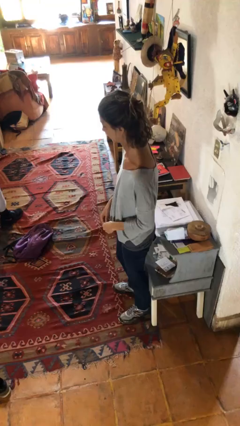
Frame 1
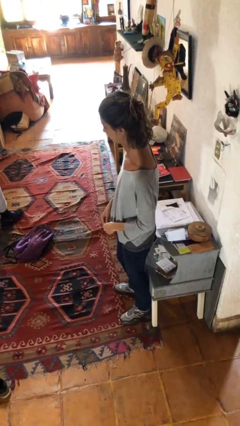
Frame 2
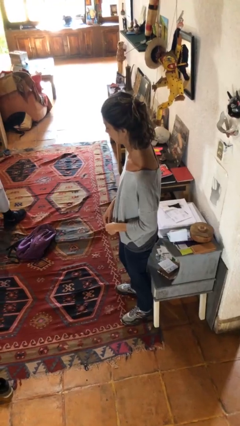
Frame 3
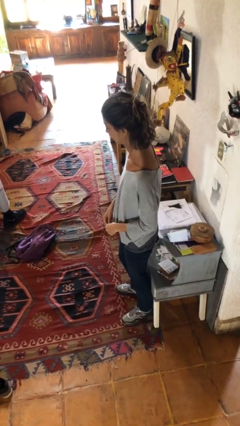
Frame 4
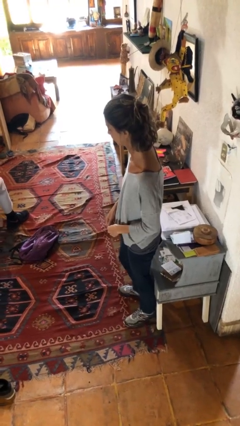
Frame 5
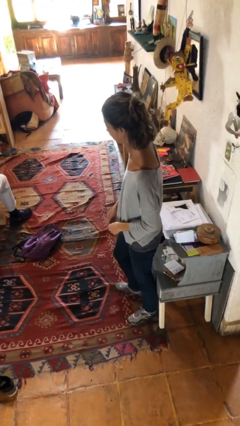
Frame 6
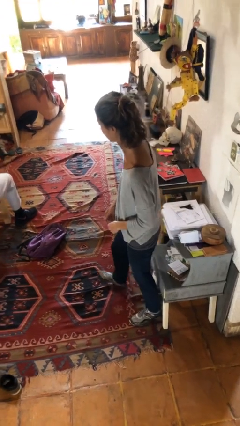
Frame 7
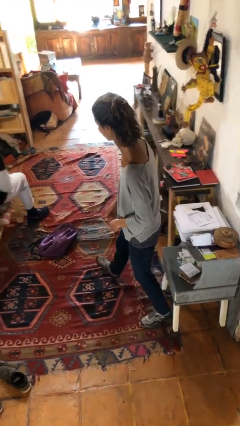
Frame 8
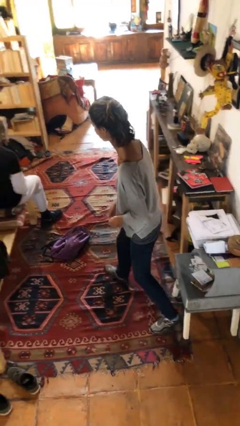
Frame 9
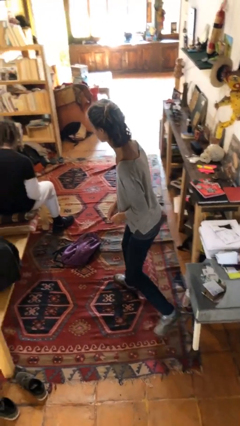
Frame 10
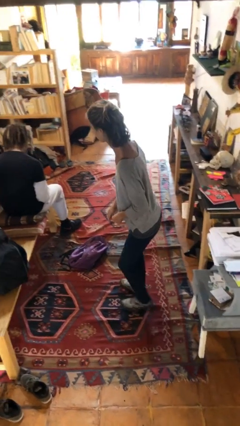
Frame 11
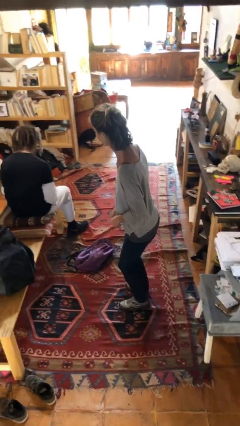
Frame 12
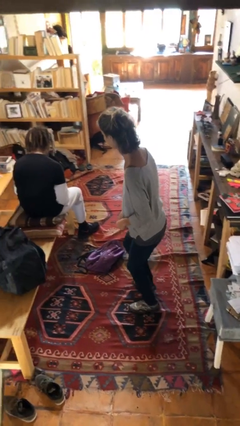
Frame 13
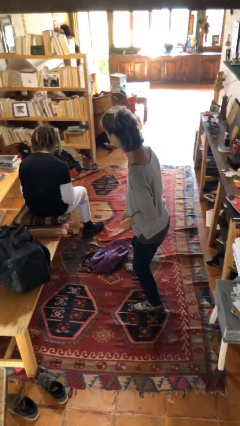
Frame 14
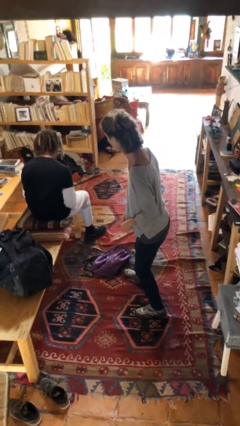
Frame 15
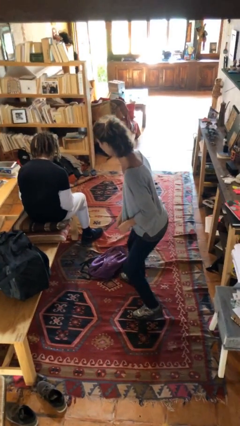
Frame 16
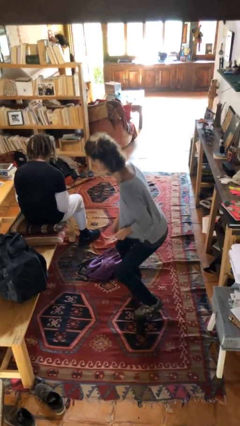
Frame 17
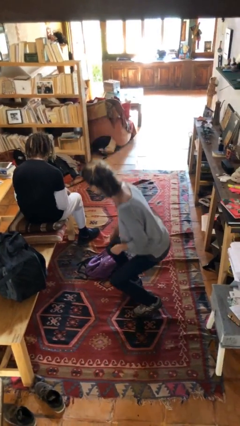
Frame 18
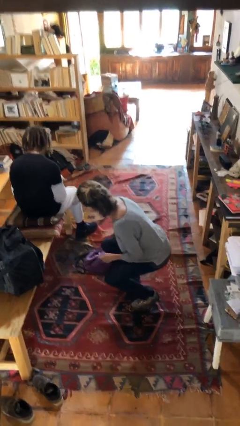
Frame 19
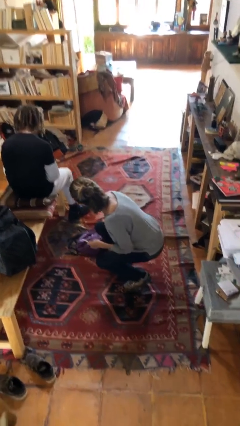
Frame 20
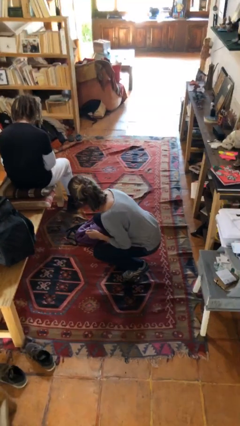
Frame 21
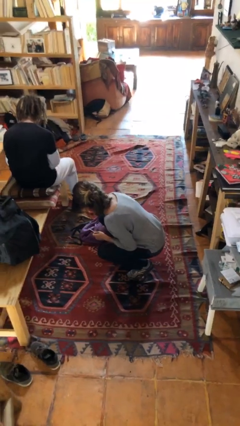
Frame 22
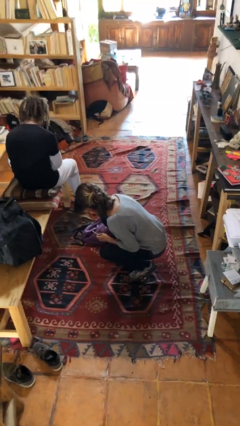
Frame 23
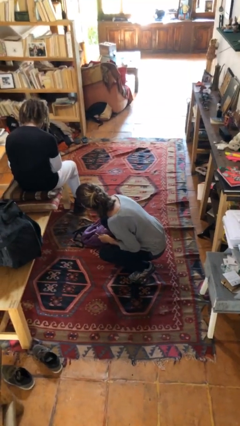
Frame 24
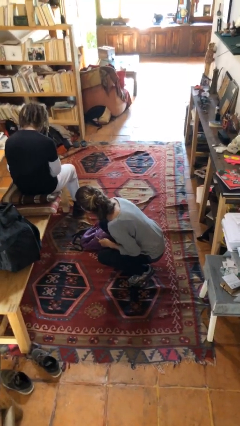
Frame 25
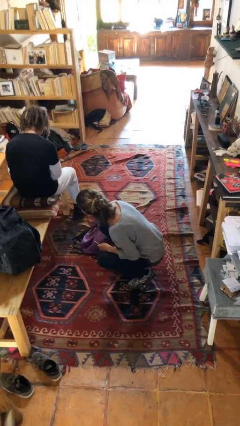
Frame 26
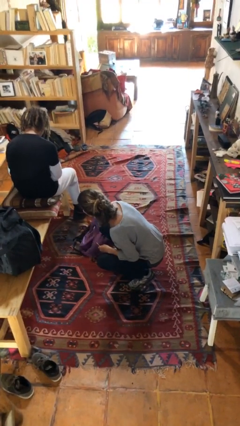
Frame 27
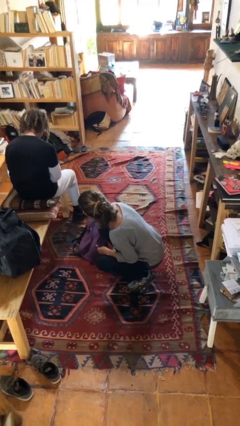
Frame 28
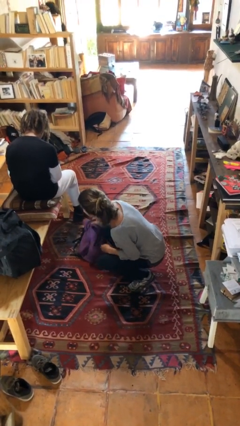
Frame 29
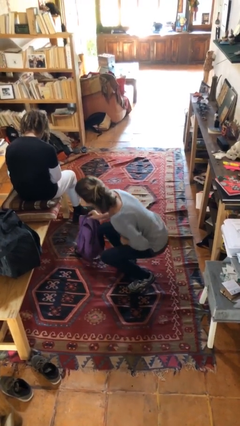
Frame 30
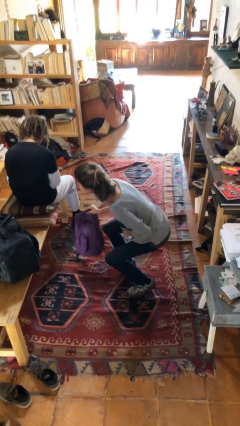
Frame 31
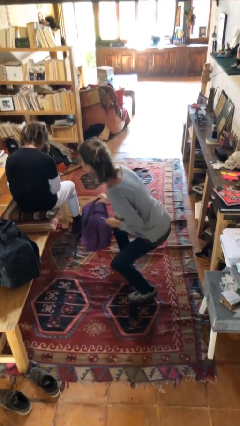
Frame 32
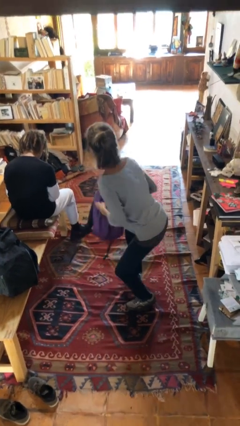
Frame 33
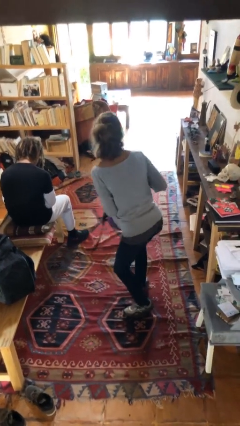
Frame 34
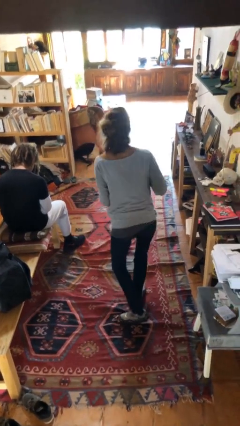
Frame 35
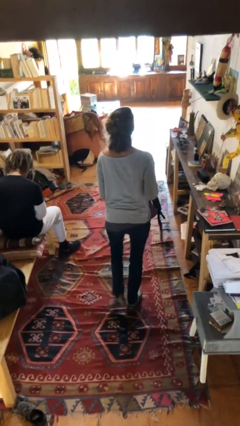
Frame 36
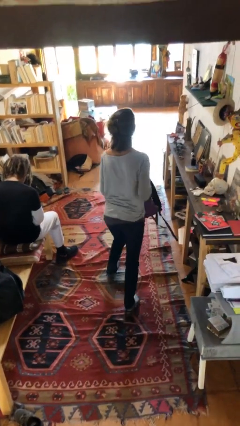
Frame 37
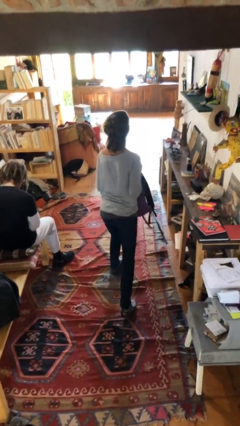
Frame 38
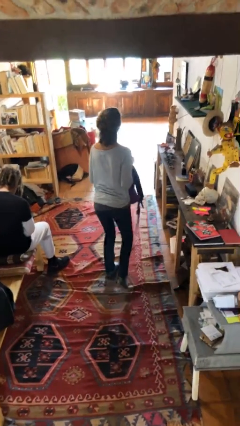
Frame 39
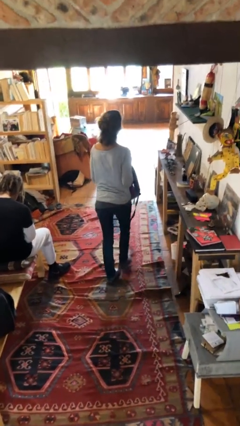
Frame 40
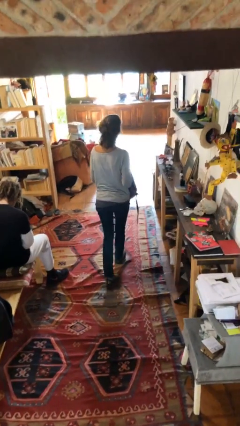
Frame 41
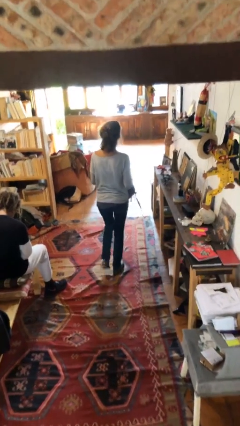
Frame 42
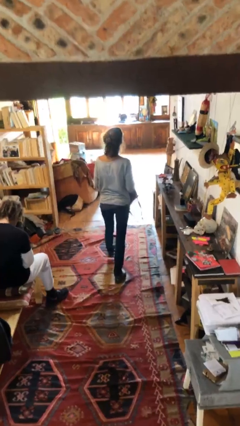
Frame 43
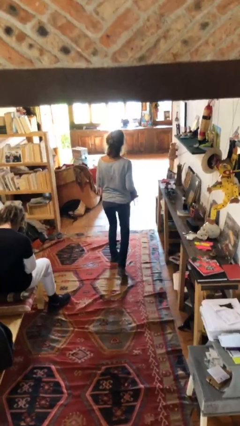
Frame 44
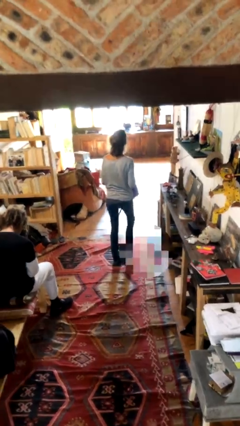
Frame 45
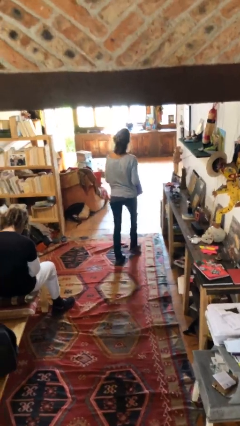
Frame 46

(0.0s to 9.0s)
person steals object from person

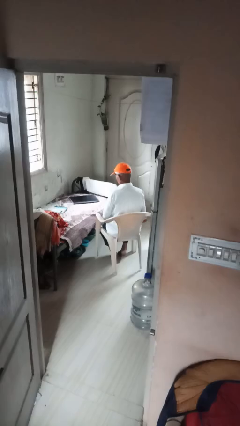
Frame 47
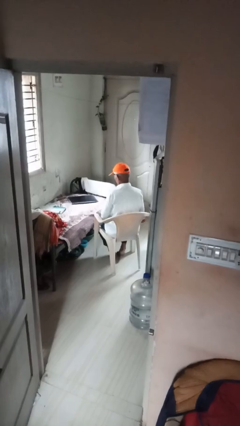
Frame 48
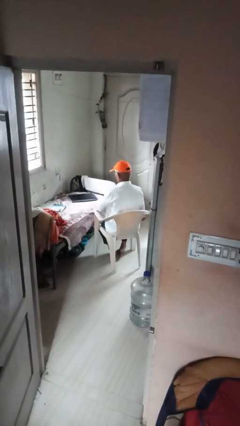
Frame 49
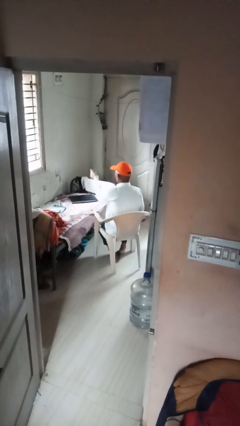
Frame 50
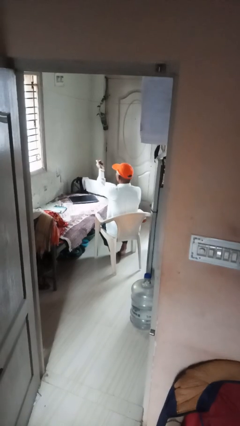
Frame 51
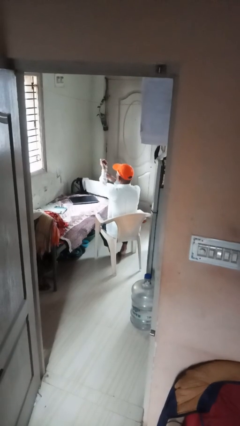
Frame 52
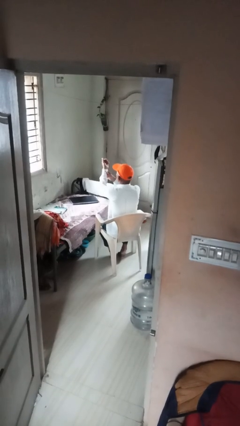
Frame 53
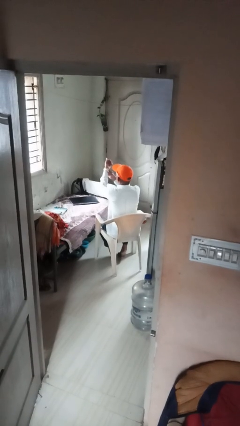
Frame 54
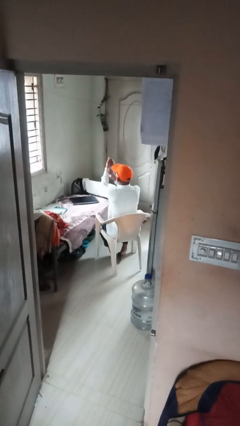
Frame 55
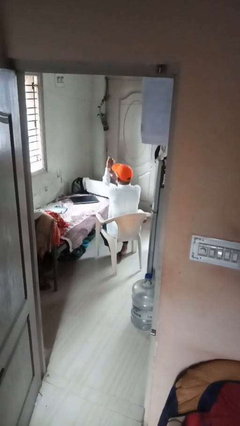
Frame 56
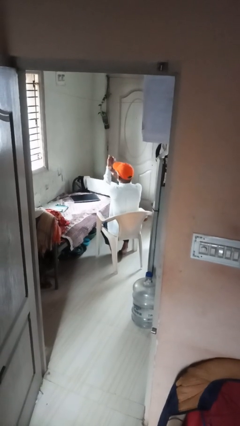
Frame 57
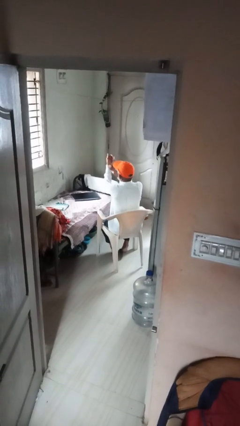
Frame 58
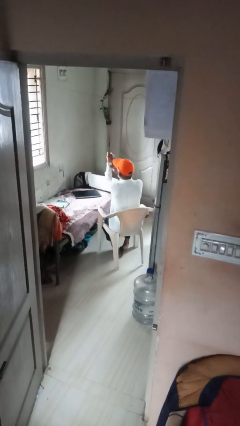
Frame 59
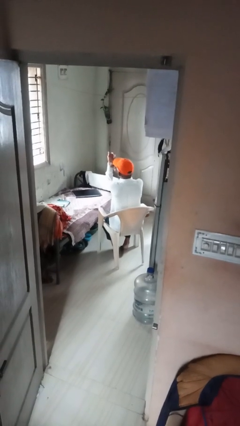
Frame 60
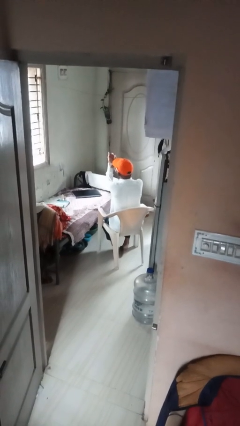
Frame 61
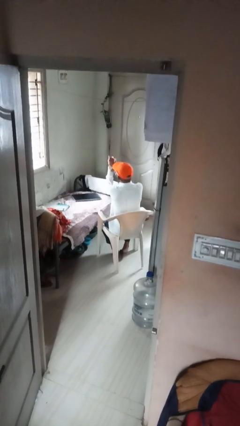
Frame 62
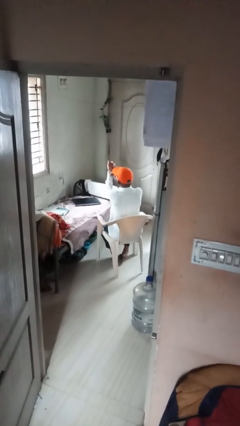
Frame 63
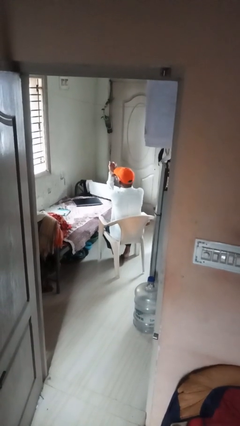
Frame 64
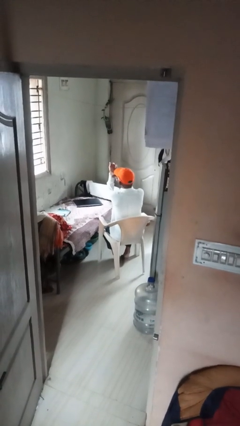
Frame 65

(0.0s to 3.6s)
person looks at wristwatch

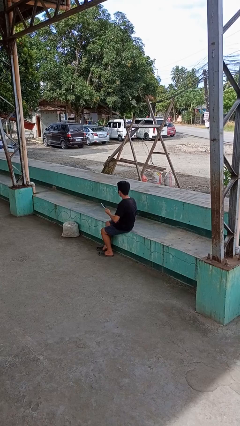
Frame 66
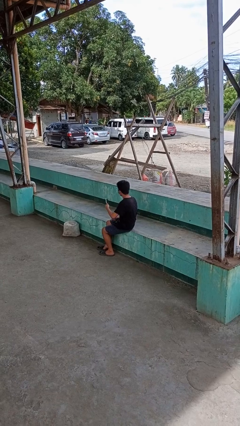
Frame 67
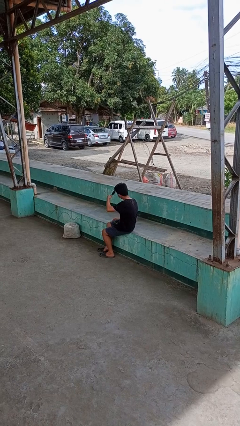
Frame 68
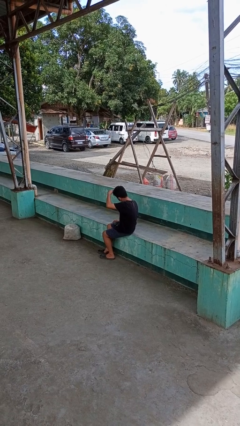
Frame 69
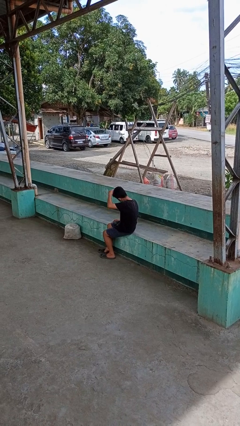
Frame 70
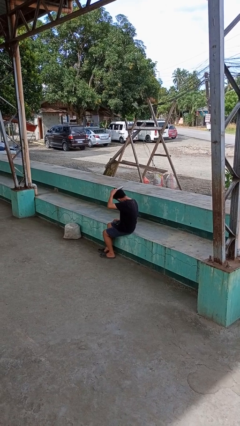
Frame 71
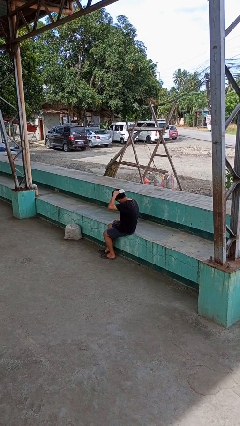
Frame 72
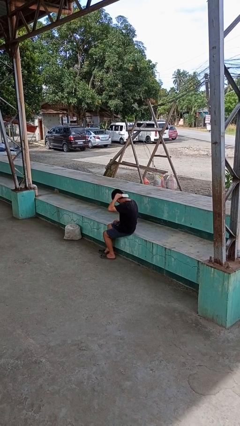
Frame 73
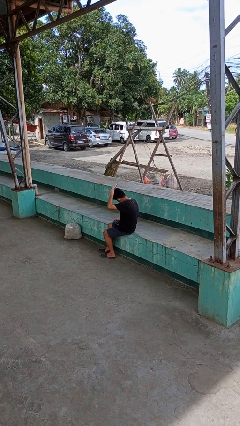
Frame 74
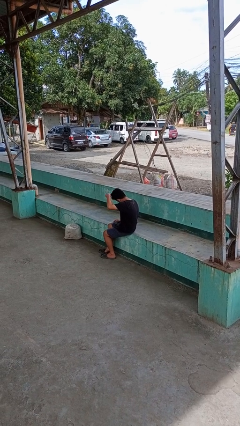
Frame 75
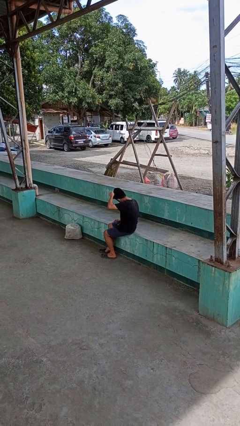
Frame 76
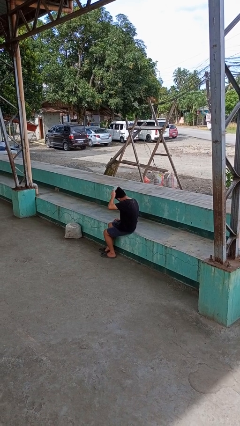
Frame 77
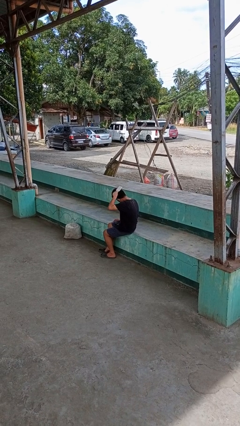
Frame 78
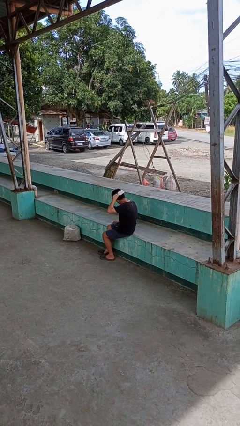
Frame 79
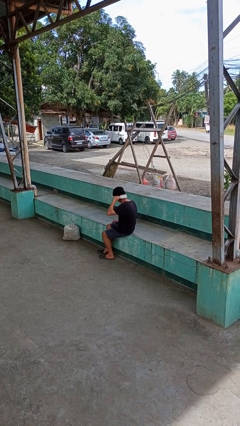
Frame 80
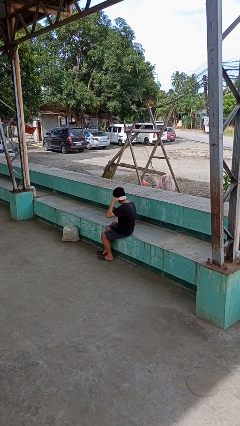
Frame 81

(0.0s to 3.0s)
person brushes hair

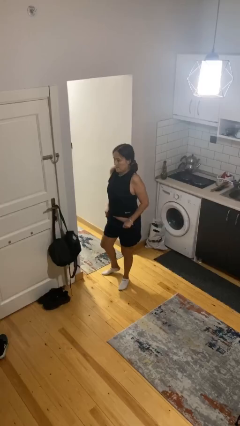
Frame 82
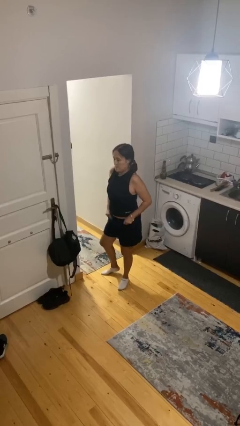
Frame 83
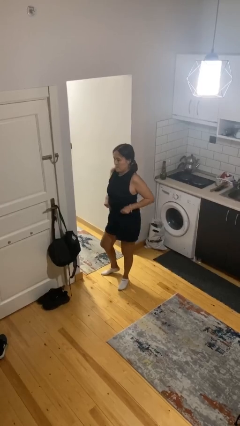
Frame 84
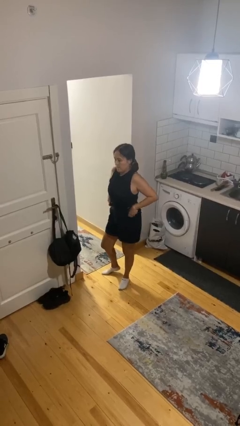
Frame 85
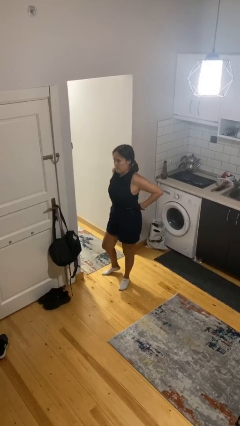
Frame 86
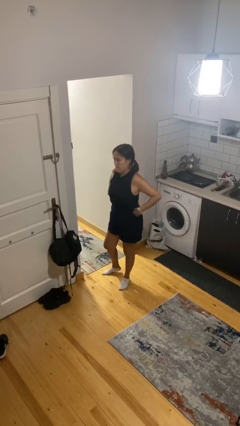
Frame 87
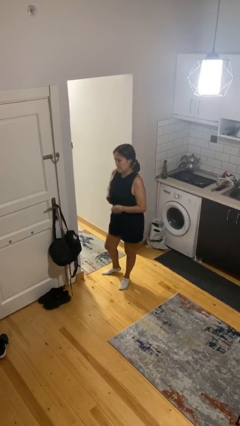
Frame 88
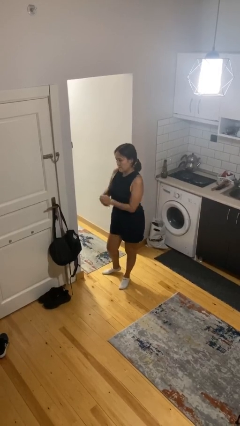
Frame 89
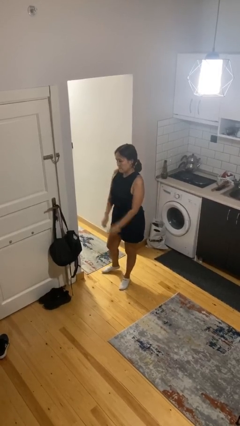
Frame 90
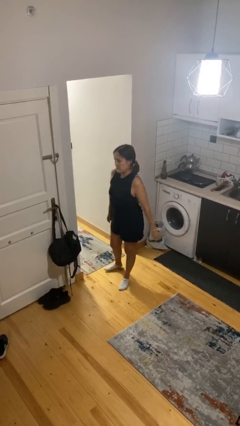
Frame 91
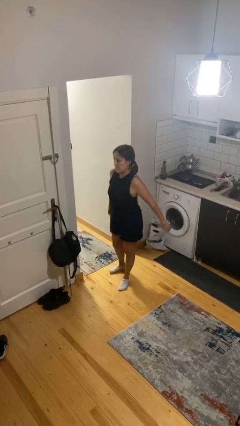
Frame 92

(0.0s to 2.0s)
person hikes up pants

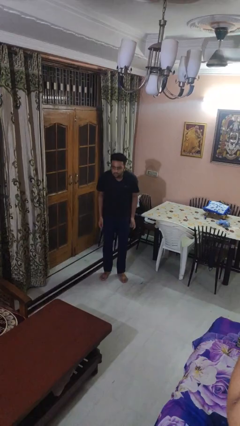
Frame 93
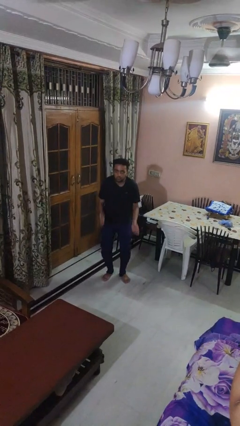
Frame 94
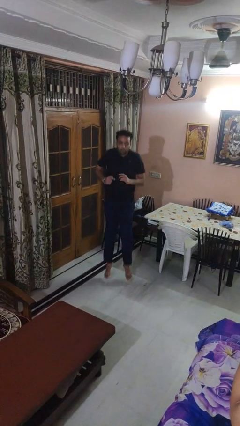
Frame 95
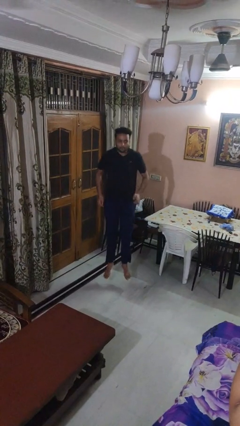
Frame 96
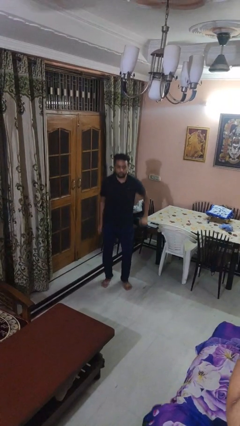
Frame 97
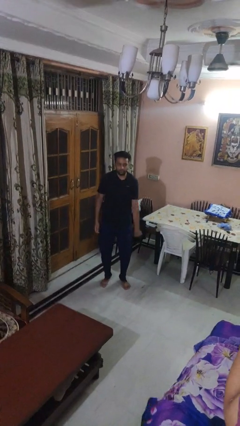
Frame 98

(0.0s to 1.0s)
person jumps
